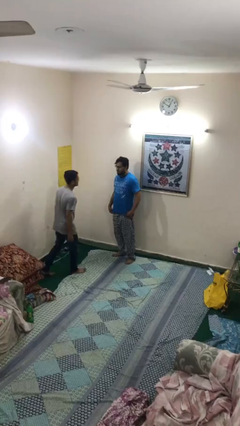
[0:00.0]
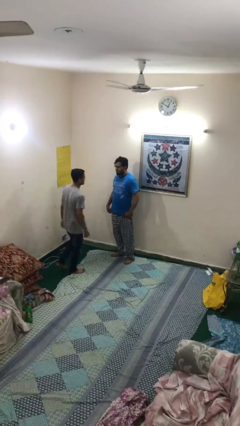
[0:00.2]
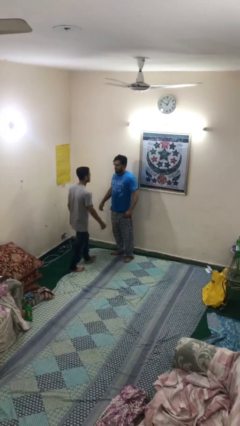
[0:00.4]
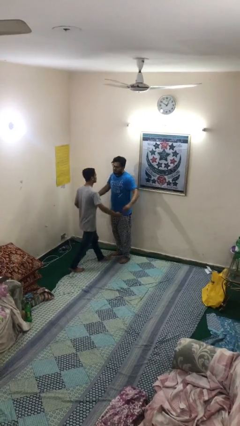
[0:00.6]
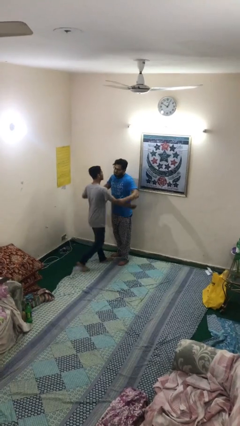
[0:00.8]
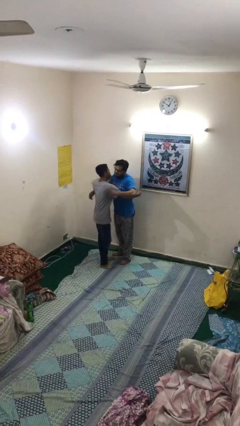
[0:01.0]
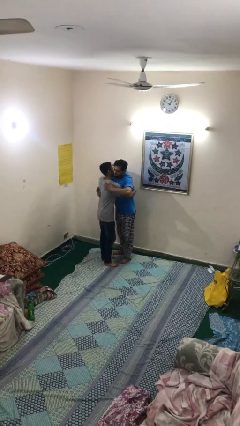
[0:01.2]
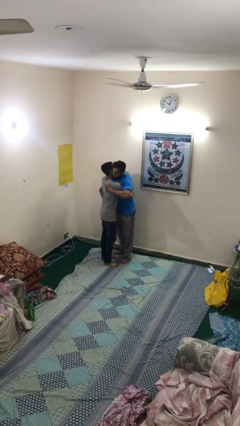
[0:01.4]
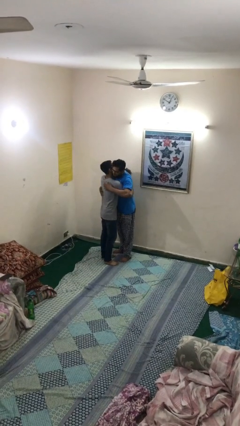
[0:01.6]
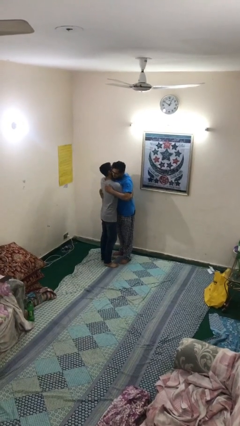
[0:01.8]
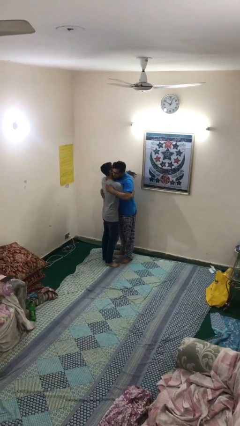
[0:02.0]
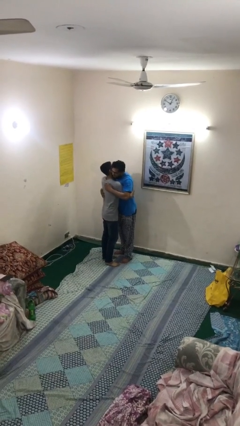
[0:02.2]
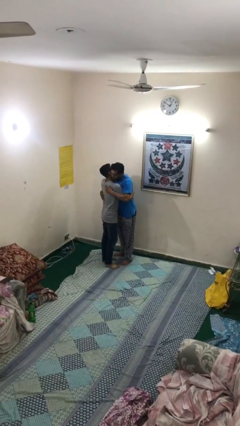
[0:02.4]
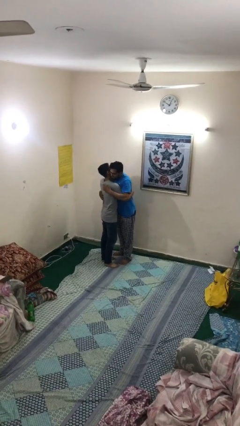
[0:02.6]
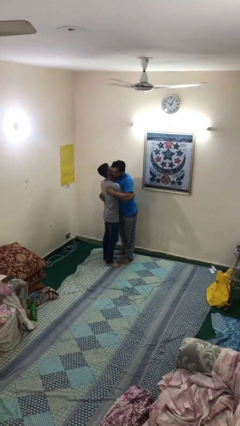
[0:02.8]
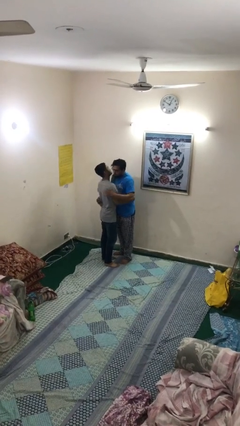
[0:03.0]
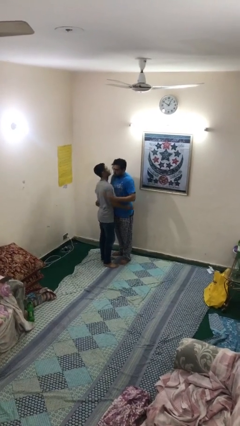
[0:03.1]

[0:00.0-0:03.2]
person embraces person

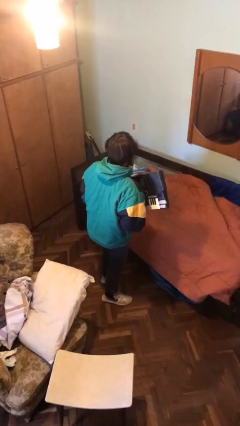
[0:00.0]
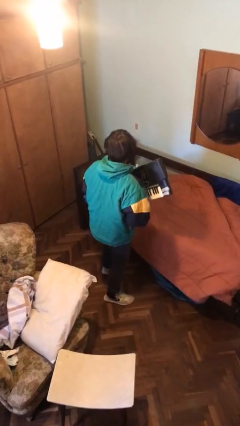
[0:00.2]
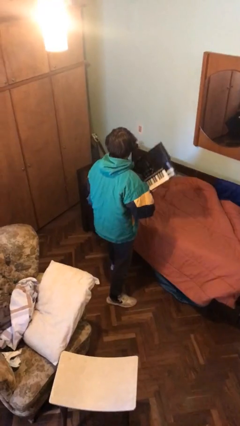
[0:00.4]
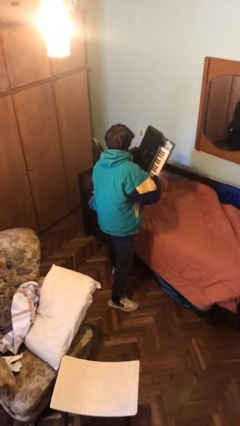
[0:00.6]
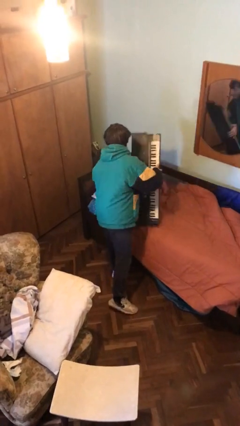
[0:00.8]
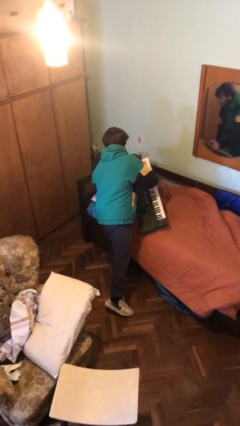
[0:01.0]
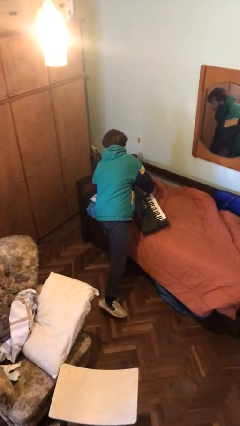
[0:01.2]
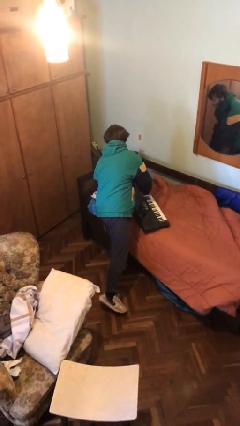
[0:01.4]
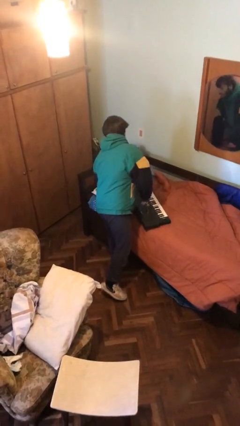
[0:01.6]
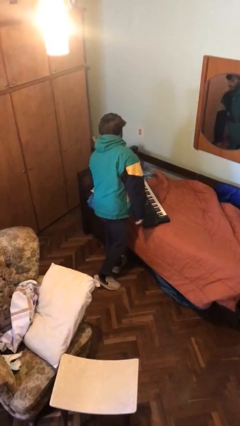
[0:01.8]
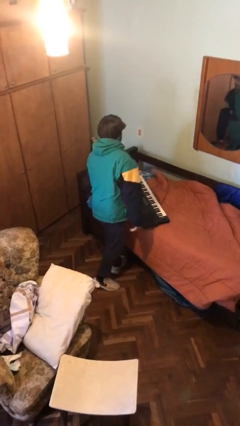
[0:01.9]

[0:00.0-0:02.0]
person puts down object on bed

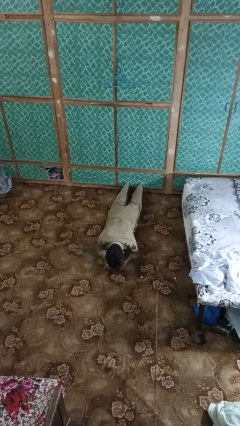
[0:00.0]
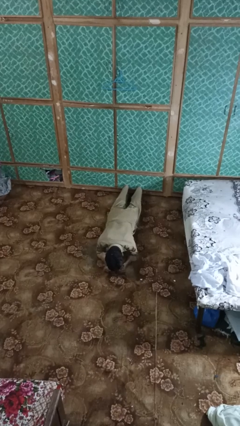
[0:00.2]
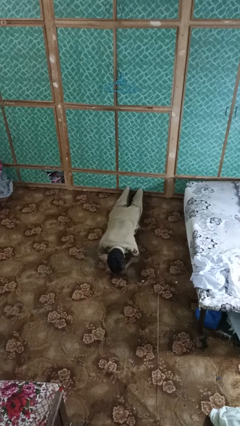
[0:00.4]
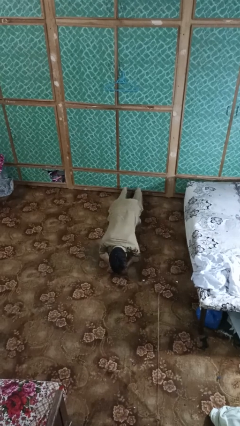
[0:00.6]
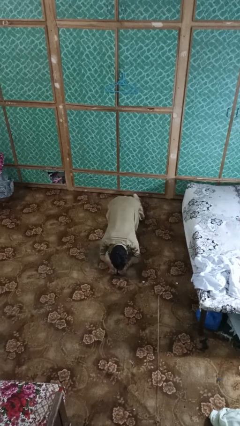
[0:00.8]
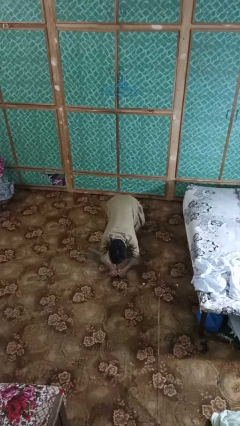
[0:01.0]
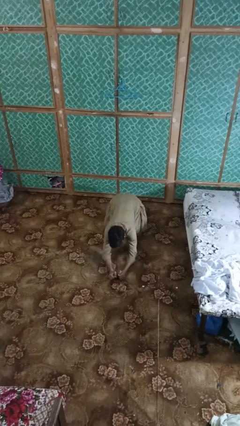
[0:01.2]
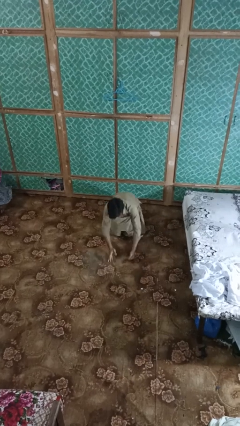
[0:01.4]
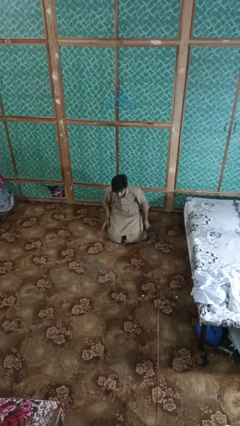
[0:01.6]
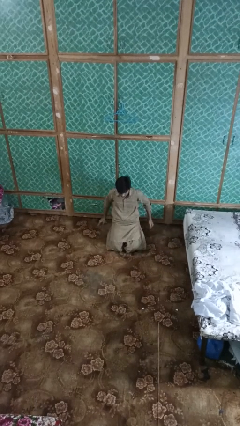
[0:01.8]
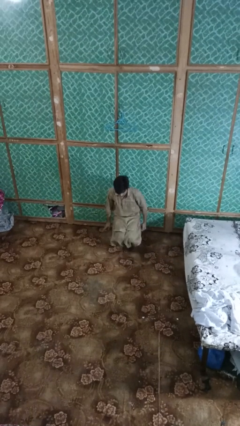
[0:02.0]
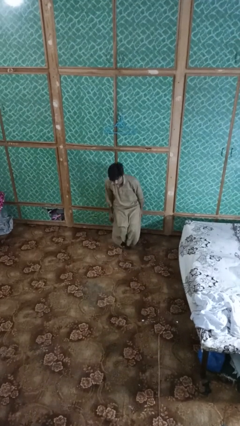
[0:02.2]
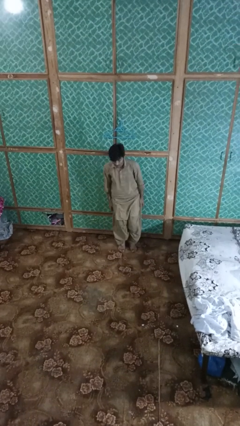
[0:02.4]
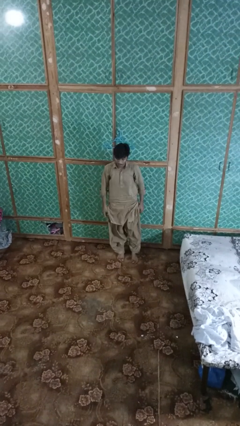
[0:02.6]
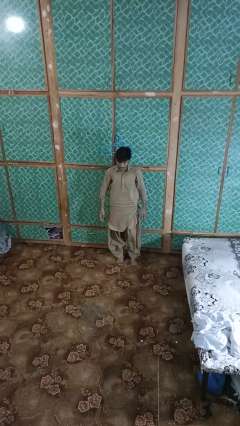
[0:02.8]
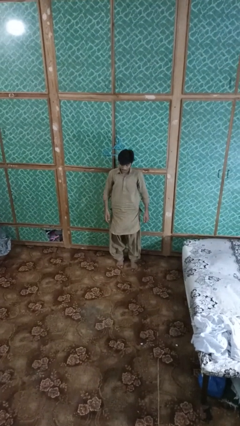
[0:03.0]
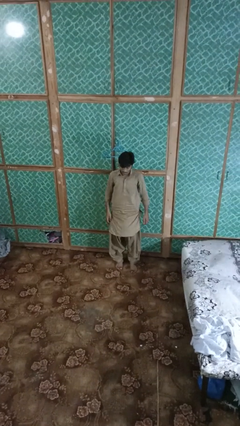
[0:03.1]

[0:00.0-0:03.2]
person stands up from floor

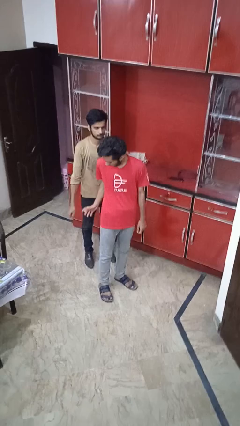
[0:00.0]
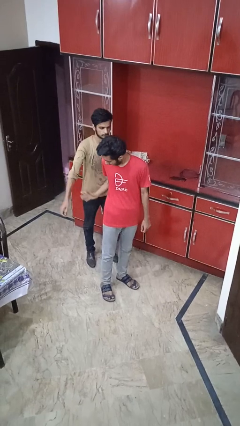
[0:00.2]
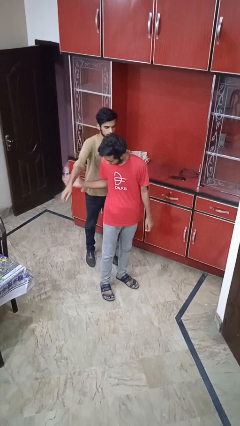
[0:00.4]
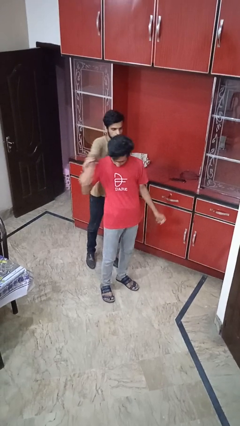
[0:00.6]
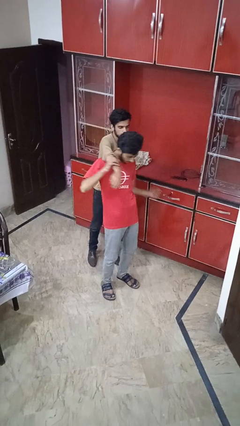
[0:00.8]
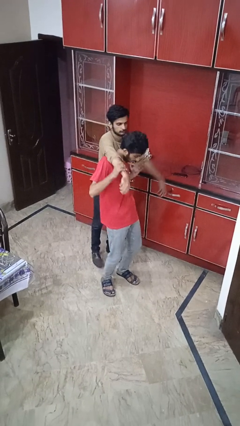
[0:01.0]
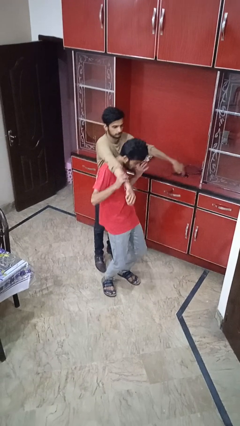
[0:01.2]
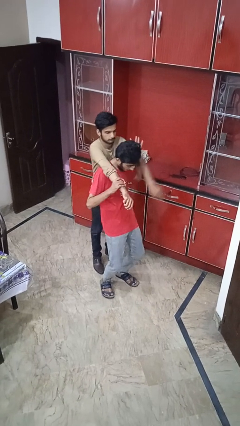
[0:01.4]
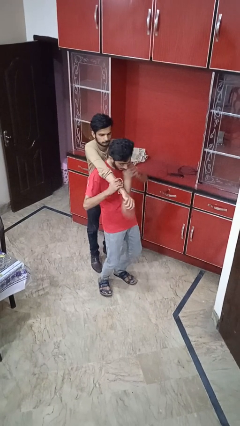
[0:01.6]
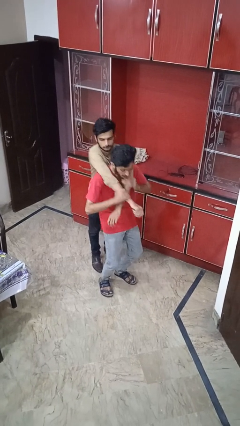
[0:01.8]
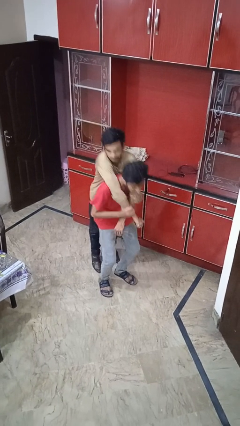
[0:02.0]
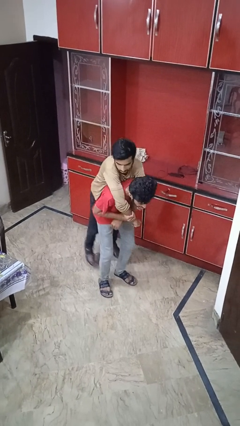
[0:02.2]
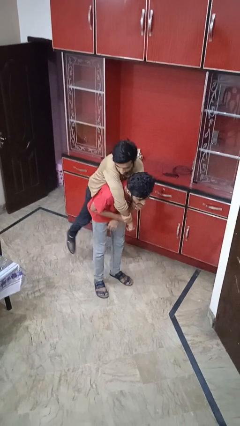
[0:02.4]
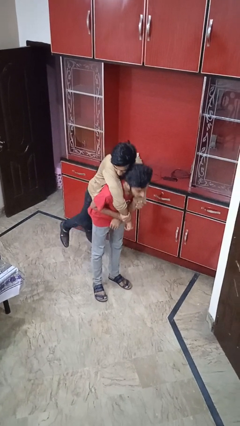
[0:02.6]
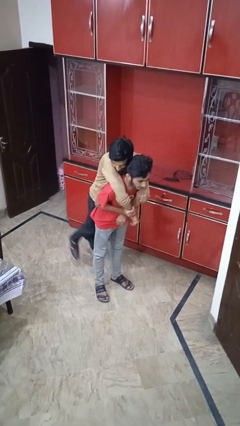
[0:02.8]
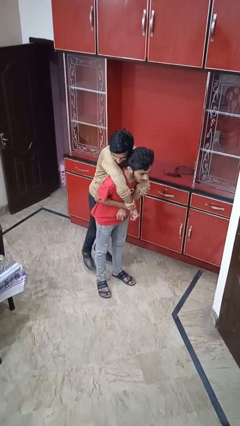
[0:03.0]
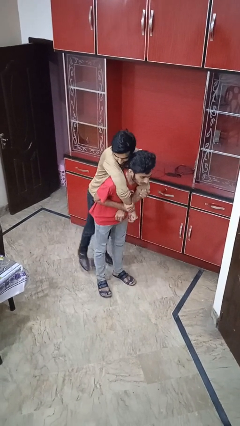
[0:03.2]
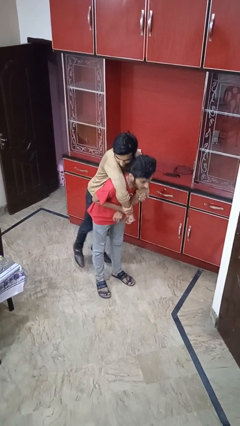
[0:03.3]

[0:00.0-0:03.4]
person carries person over shoulder

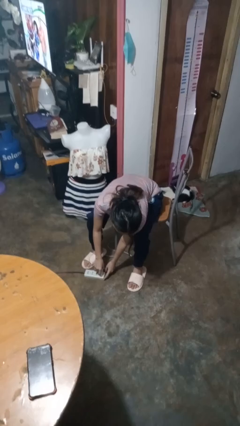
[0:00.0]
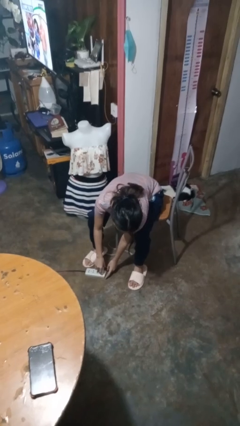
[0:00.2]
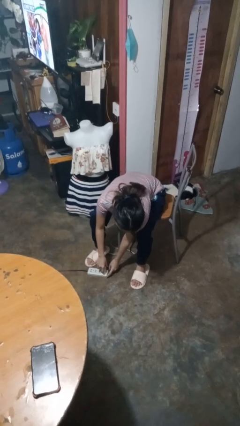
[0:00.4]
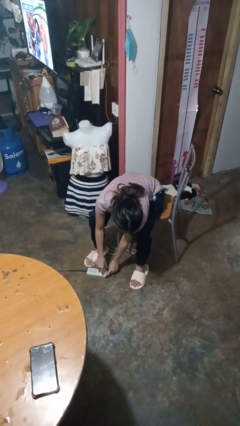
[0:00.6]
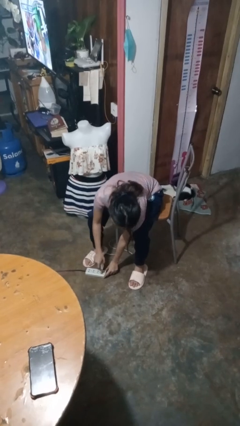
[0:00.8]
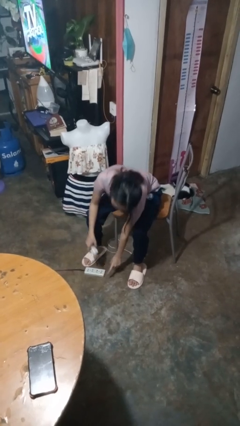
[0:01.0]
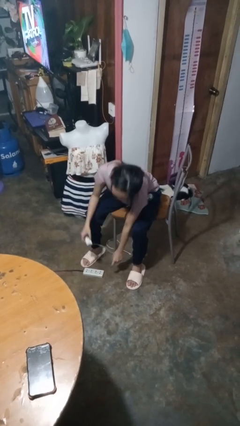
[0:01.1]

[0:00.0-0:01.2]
person unplugs from electrical socket

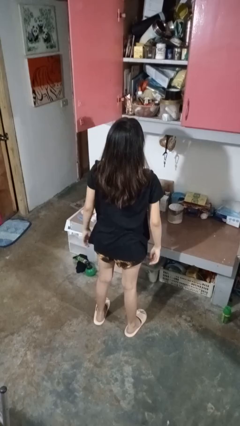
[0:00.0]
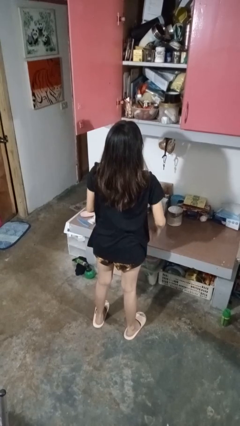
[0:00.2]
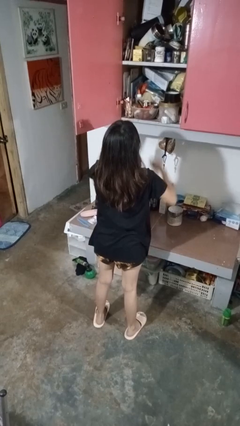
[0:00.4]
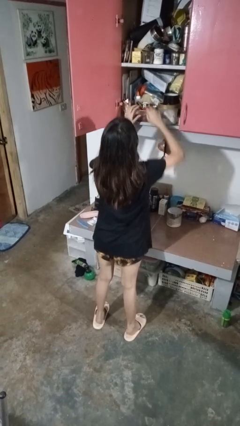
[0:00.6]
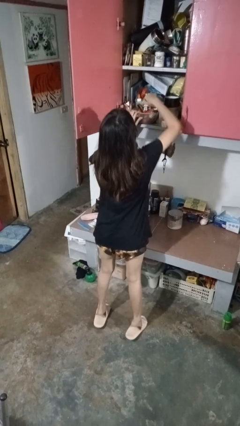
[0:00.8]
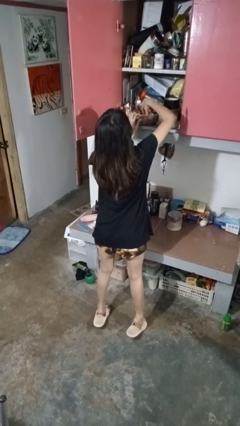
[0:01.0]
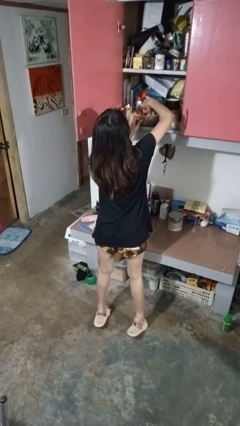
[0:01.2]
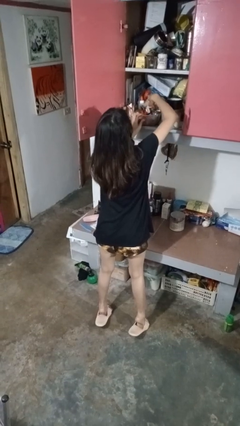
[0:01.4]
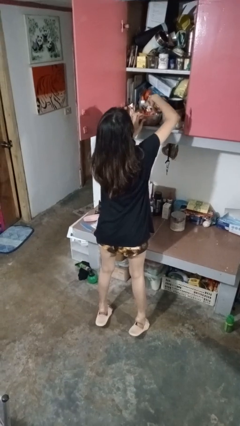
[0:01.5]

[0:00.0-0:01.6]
person searches in cabinet

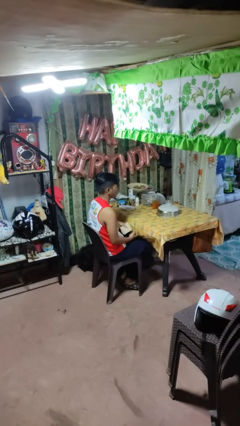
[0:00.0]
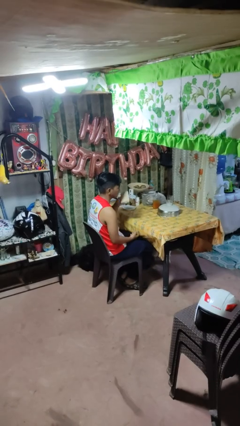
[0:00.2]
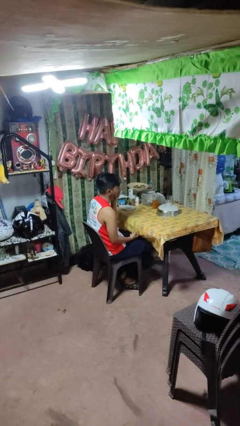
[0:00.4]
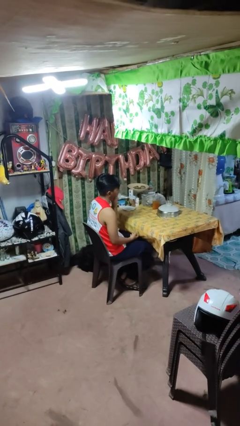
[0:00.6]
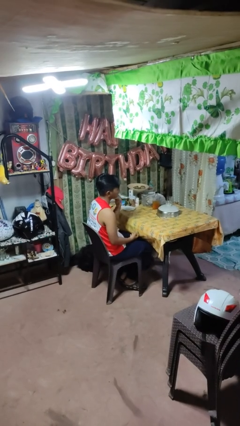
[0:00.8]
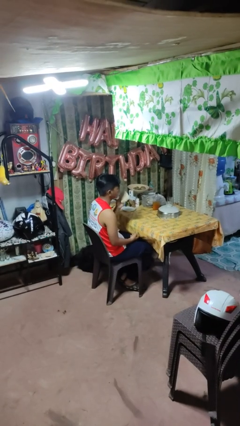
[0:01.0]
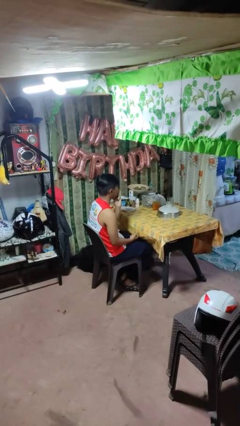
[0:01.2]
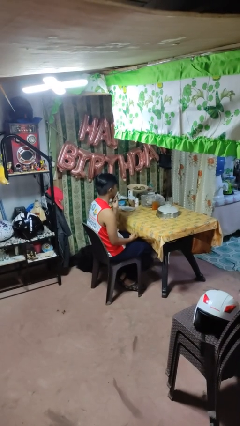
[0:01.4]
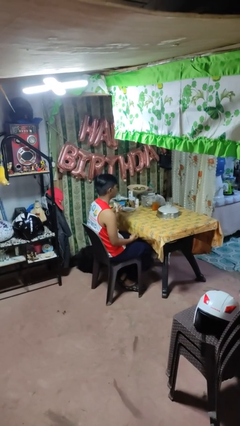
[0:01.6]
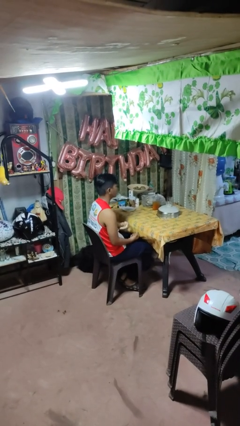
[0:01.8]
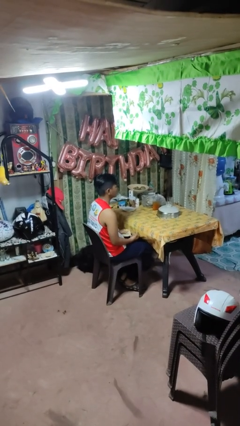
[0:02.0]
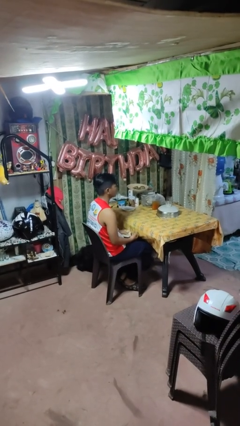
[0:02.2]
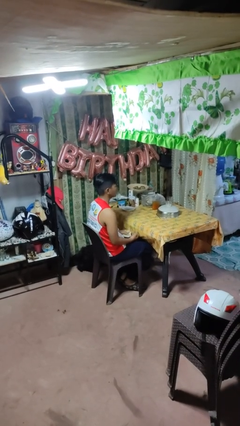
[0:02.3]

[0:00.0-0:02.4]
person wipes mouth with napkin
